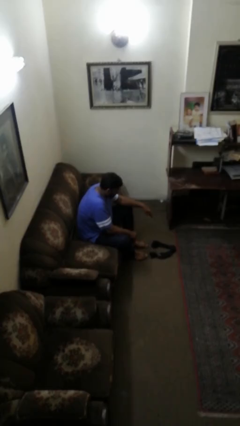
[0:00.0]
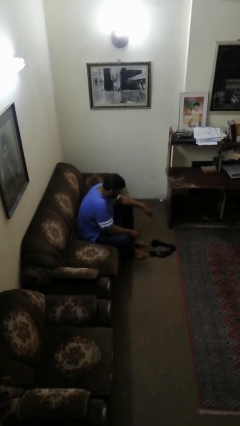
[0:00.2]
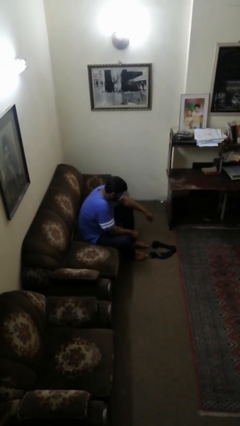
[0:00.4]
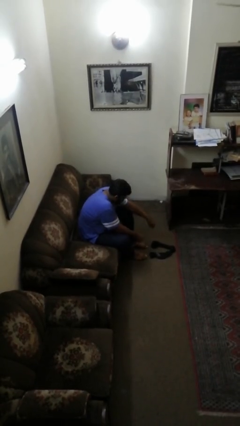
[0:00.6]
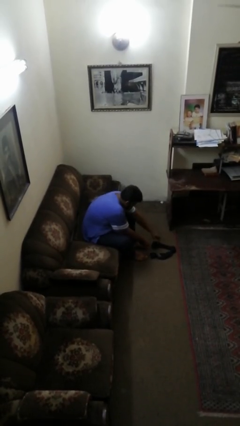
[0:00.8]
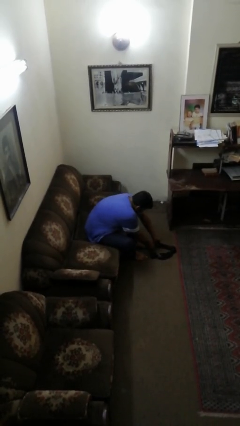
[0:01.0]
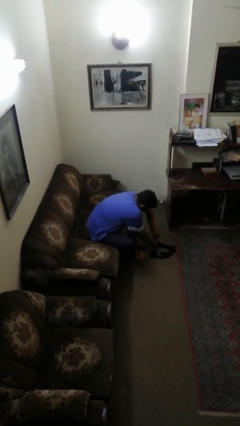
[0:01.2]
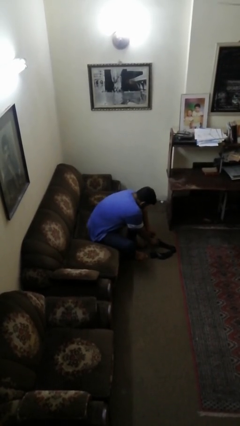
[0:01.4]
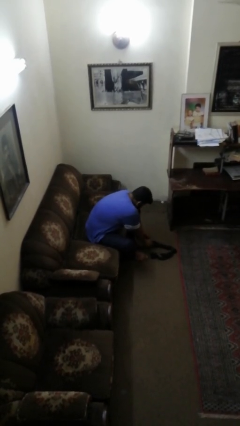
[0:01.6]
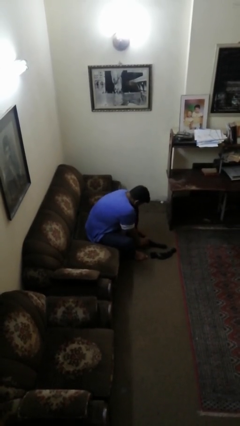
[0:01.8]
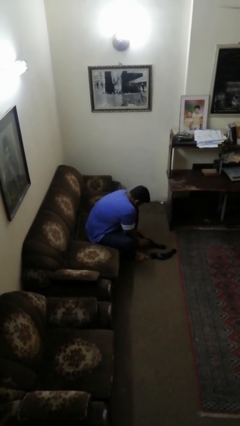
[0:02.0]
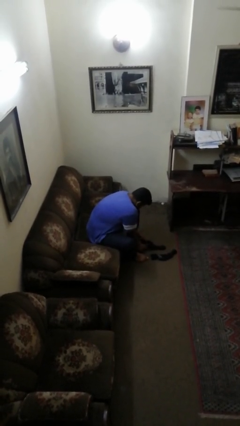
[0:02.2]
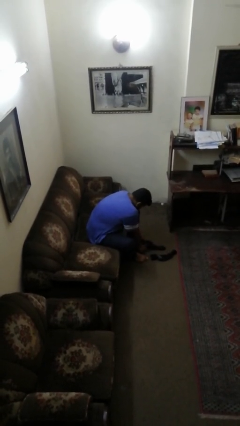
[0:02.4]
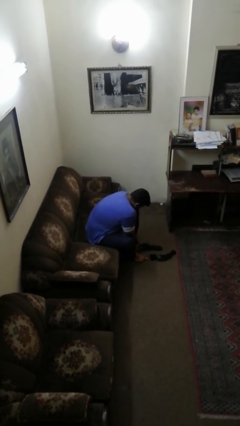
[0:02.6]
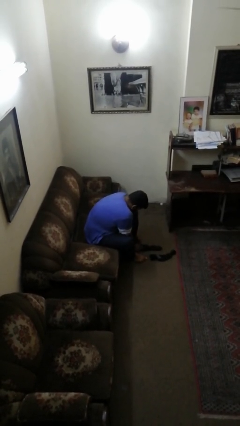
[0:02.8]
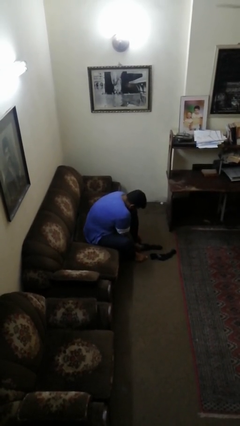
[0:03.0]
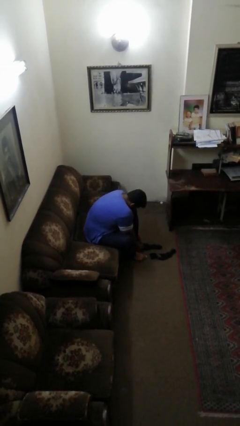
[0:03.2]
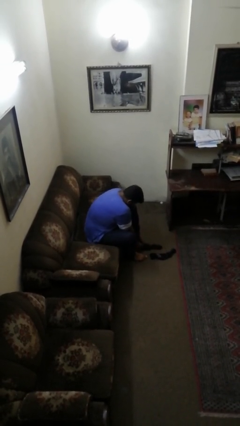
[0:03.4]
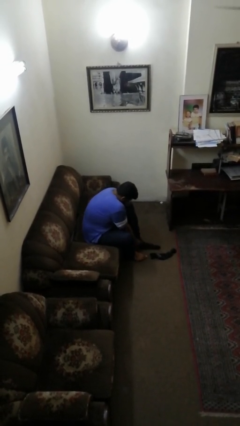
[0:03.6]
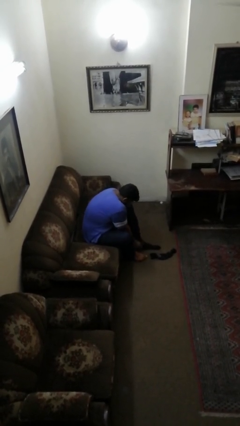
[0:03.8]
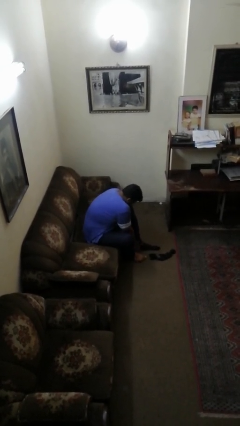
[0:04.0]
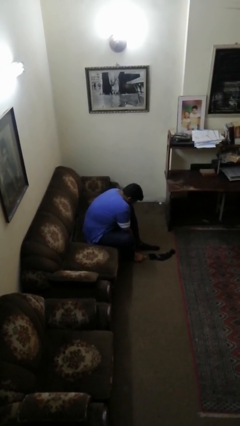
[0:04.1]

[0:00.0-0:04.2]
person puts on socks

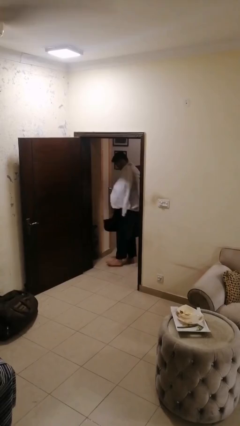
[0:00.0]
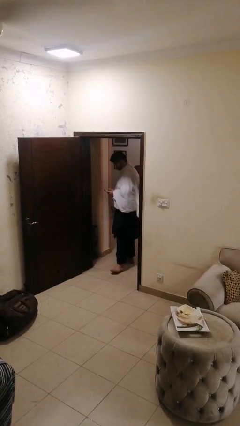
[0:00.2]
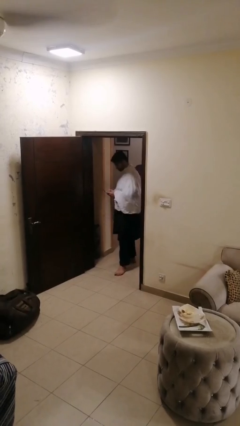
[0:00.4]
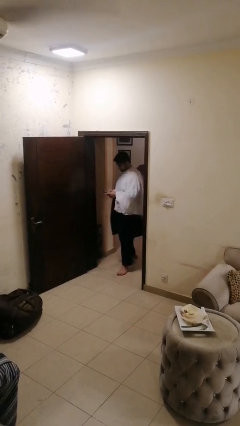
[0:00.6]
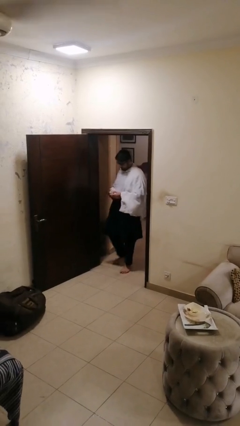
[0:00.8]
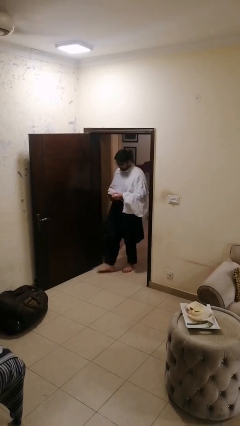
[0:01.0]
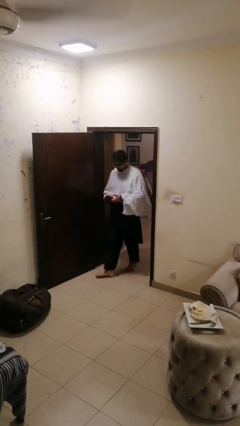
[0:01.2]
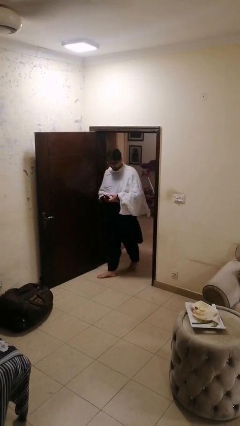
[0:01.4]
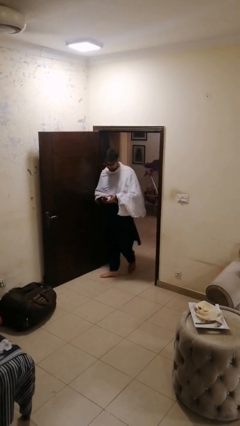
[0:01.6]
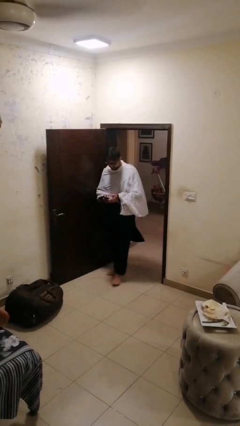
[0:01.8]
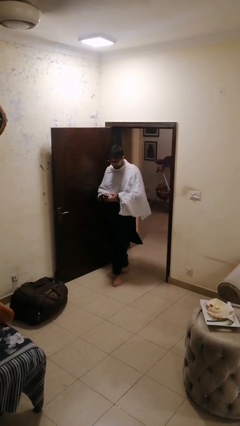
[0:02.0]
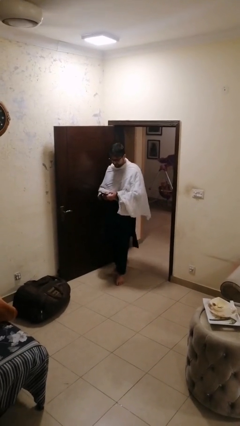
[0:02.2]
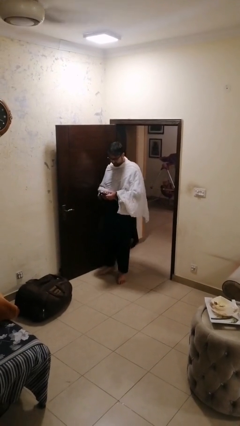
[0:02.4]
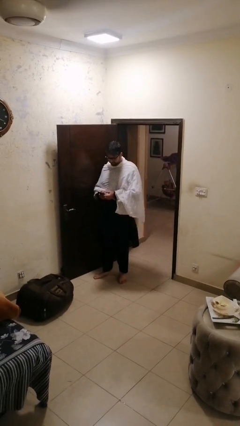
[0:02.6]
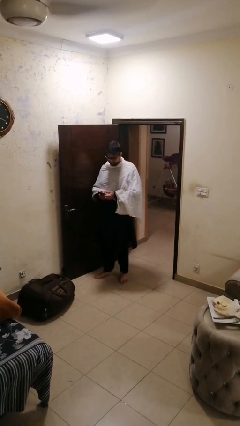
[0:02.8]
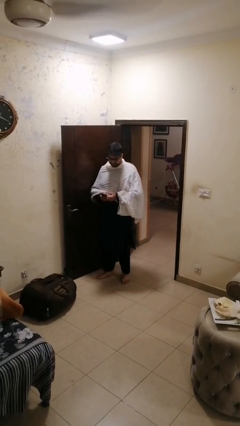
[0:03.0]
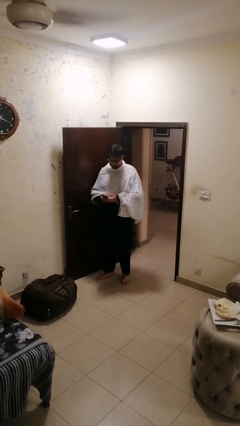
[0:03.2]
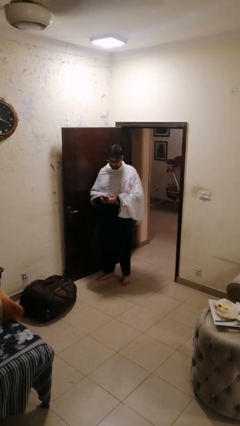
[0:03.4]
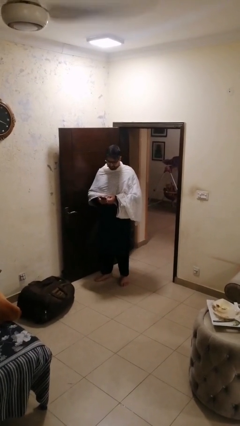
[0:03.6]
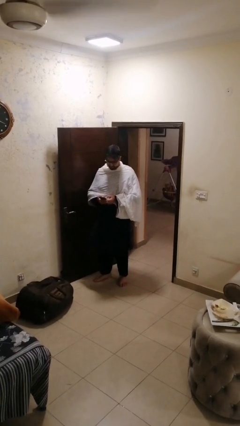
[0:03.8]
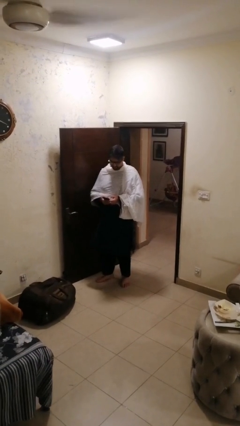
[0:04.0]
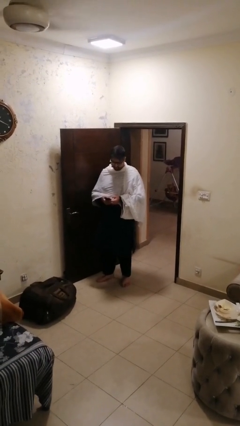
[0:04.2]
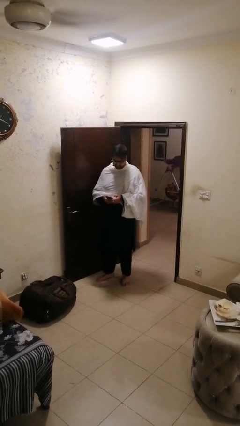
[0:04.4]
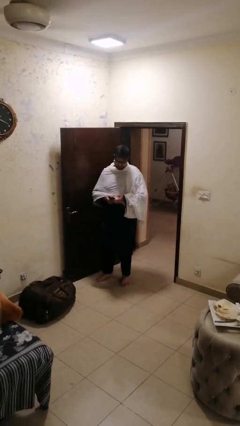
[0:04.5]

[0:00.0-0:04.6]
person enters scene through structure

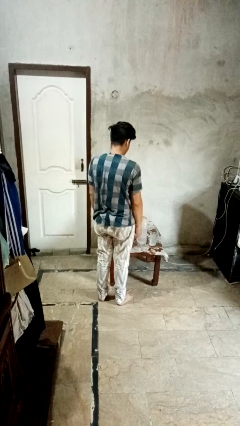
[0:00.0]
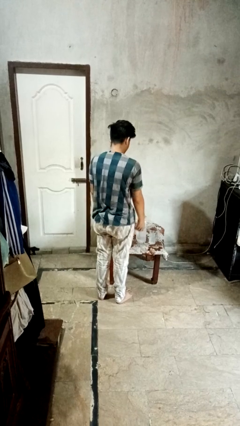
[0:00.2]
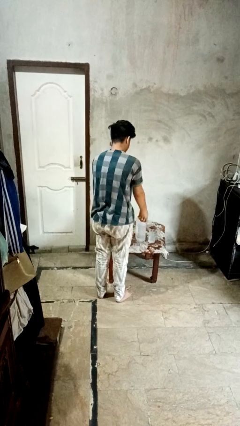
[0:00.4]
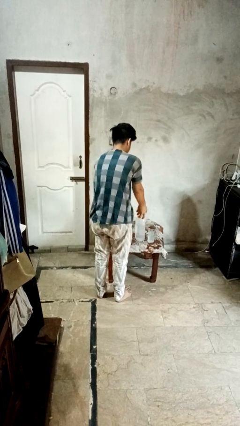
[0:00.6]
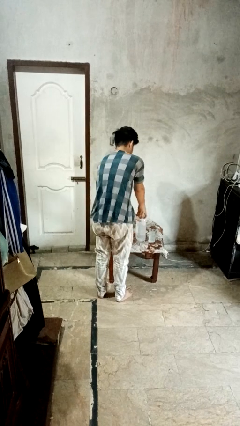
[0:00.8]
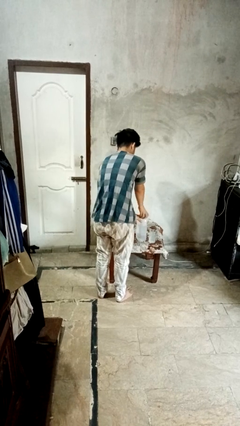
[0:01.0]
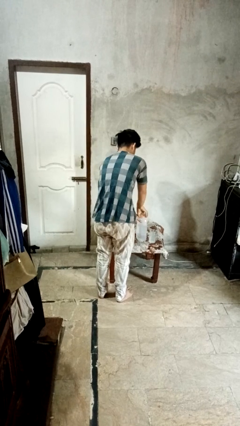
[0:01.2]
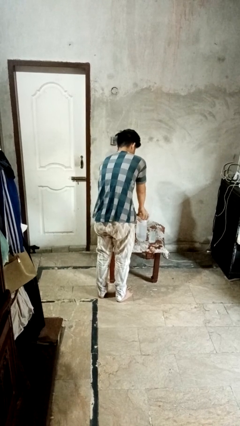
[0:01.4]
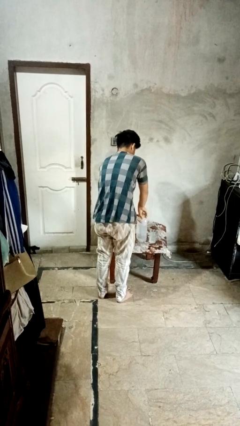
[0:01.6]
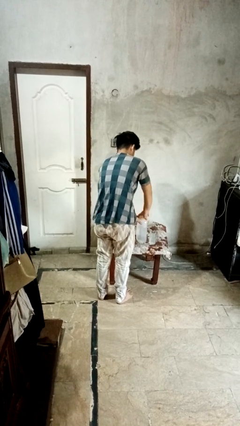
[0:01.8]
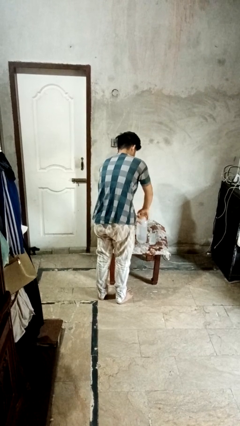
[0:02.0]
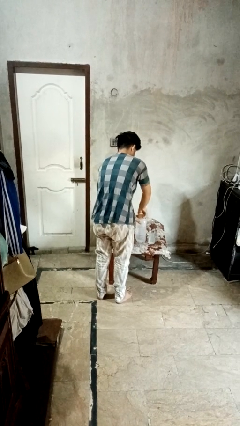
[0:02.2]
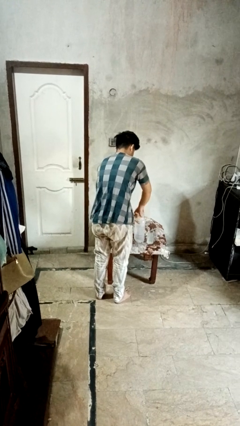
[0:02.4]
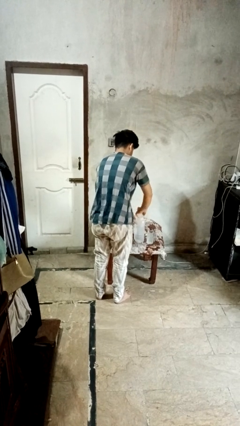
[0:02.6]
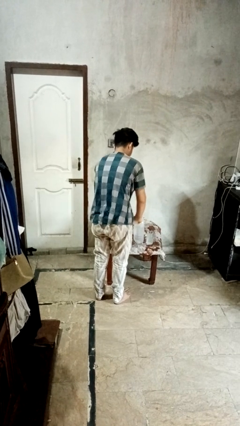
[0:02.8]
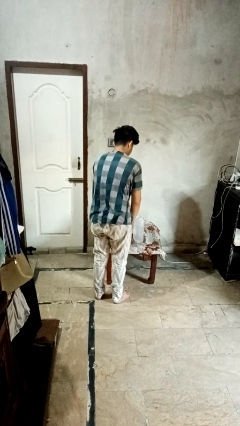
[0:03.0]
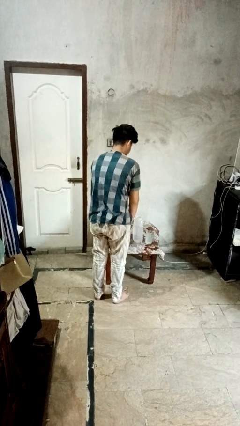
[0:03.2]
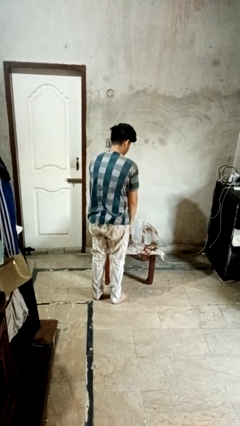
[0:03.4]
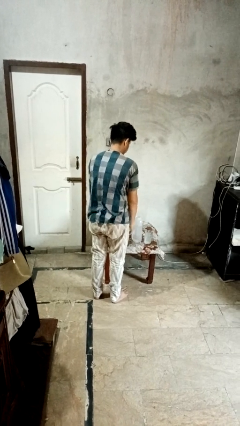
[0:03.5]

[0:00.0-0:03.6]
person unscrews lid from bottle

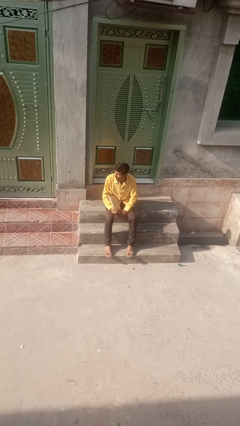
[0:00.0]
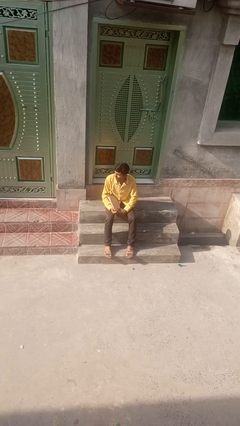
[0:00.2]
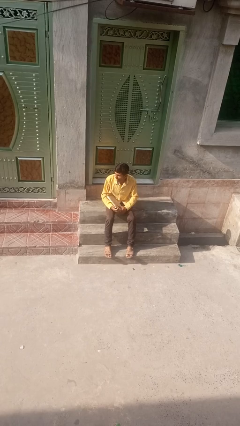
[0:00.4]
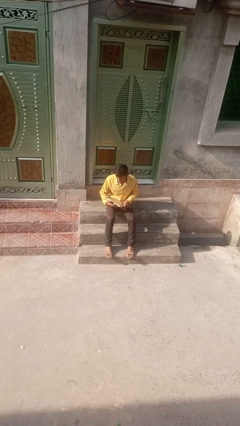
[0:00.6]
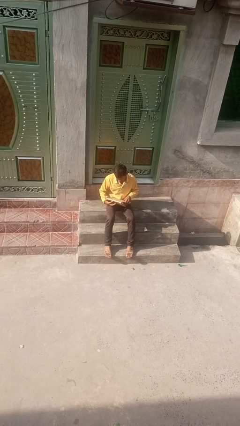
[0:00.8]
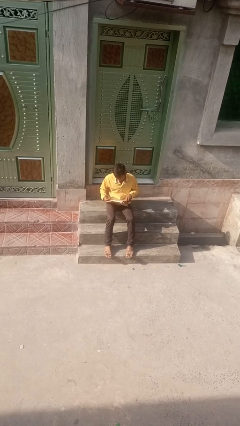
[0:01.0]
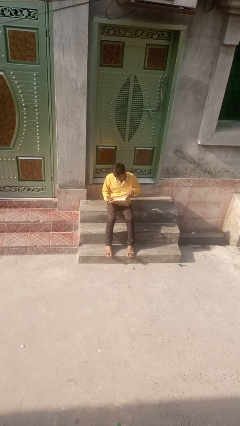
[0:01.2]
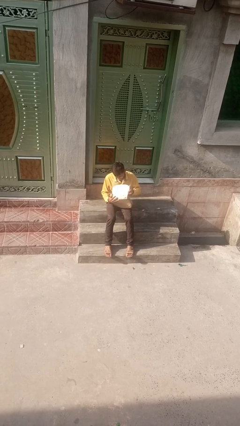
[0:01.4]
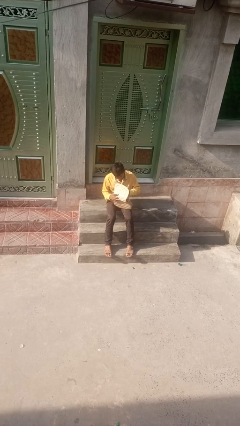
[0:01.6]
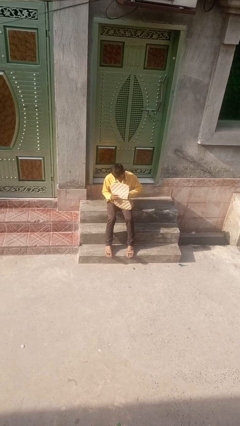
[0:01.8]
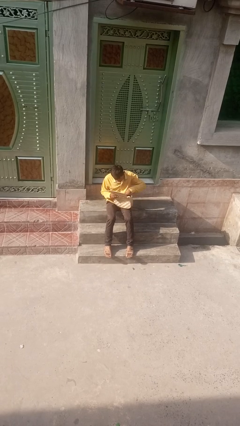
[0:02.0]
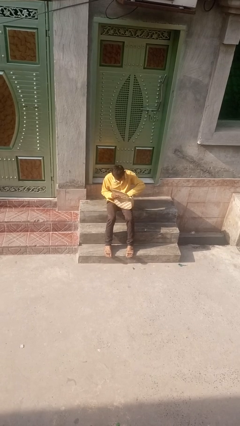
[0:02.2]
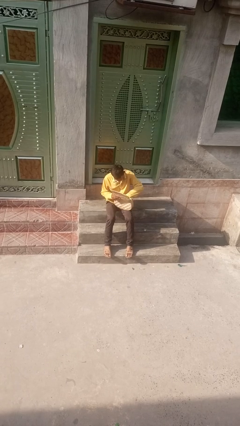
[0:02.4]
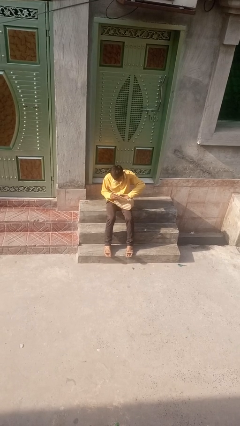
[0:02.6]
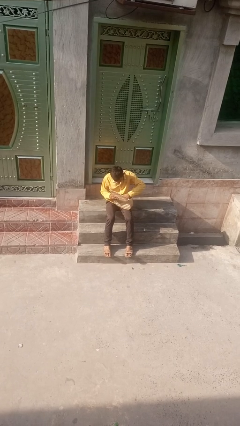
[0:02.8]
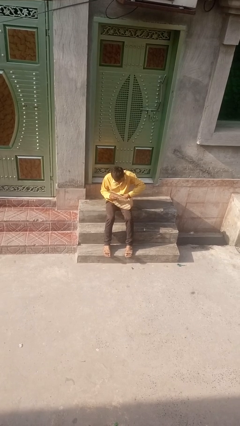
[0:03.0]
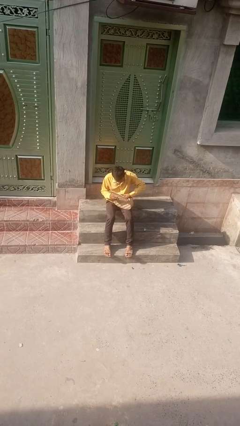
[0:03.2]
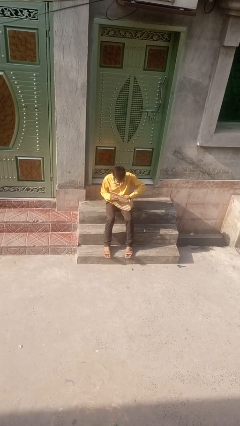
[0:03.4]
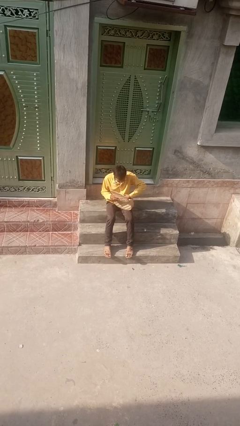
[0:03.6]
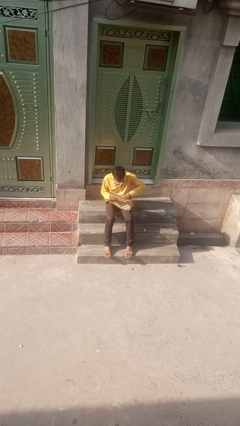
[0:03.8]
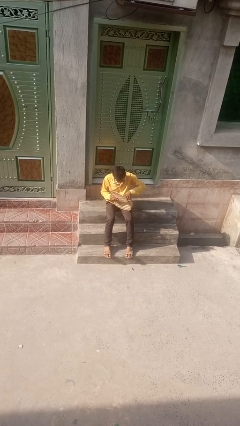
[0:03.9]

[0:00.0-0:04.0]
person searches in backpack

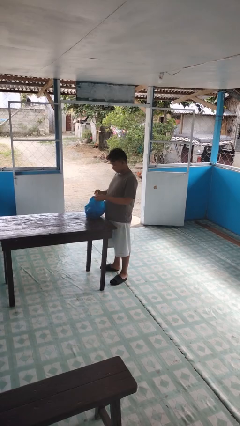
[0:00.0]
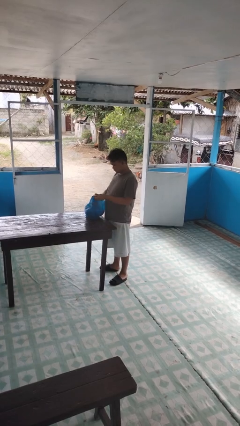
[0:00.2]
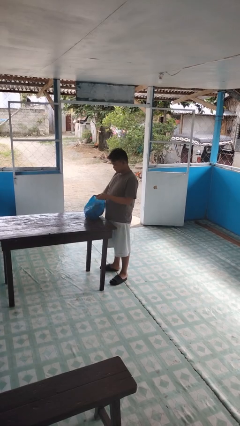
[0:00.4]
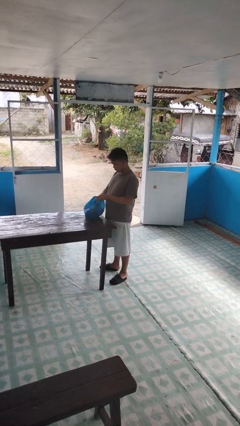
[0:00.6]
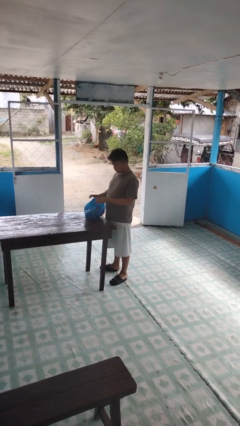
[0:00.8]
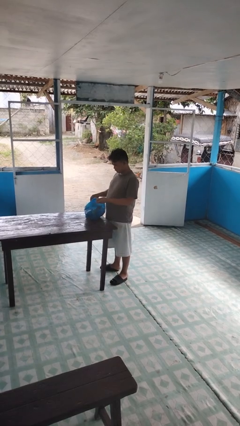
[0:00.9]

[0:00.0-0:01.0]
person puts object into bag

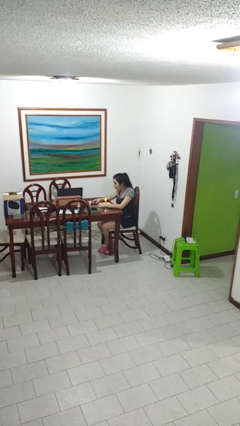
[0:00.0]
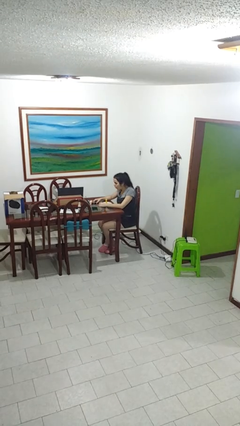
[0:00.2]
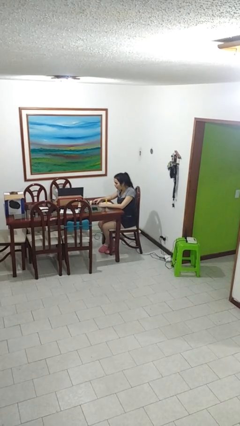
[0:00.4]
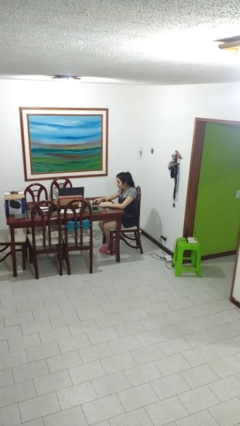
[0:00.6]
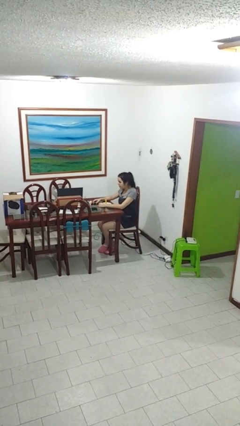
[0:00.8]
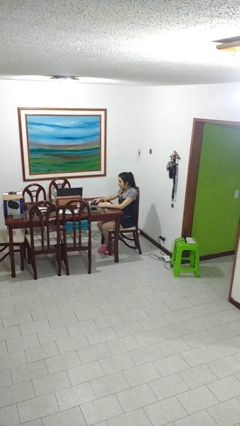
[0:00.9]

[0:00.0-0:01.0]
person extinguishes candle
